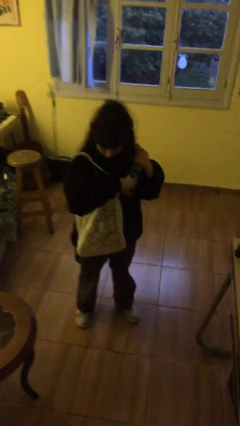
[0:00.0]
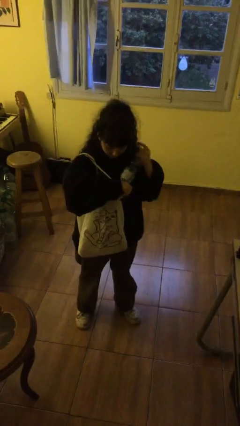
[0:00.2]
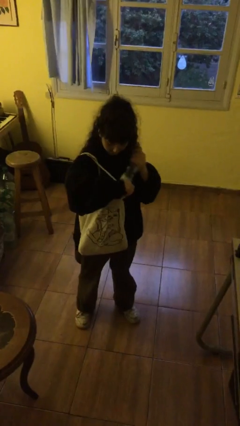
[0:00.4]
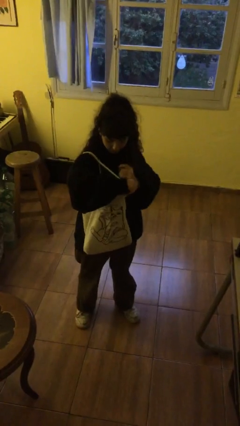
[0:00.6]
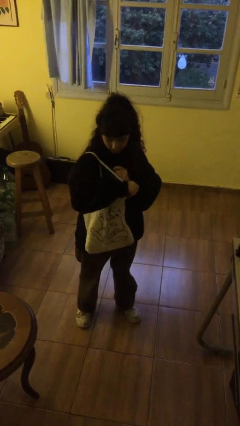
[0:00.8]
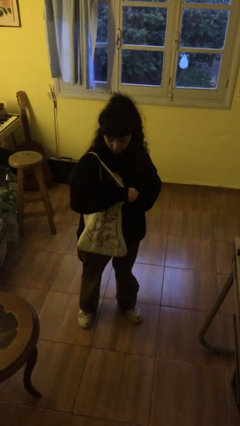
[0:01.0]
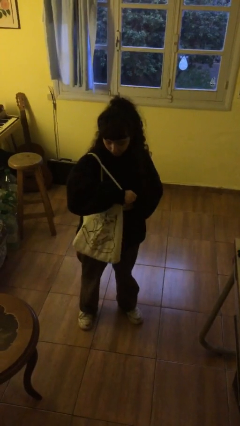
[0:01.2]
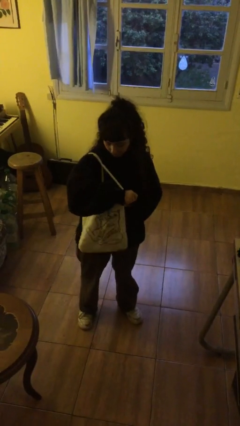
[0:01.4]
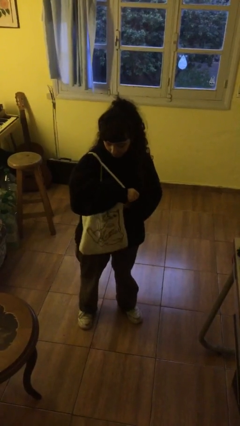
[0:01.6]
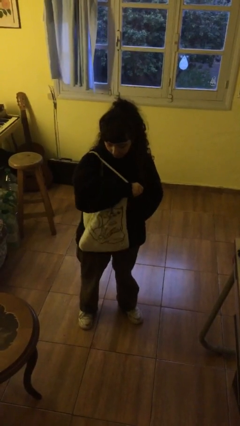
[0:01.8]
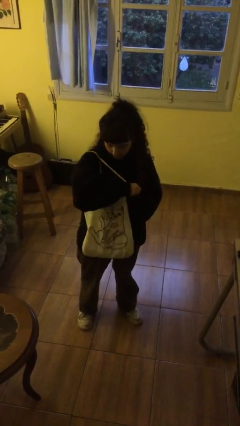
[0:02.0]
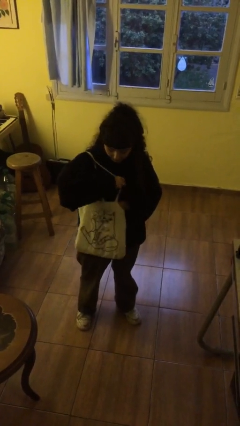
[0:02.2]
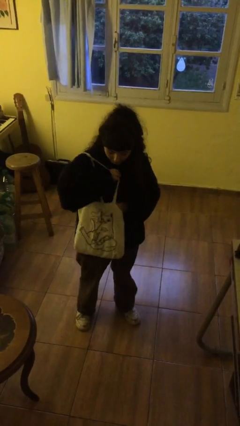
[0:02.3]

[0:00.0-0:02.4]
person puts object into purse

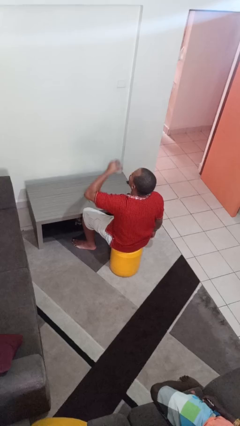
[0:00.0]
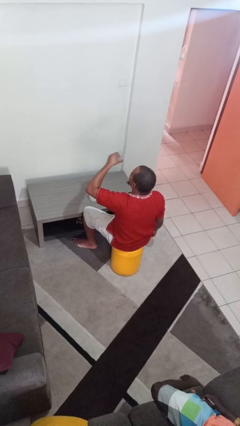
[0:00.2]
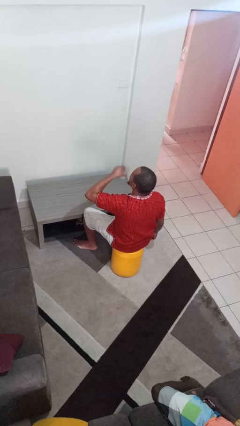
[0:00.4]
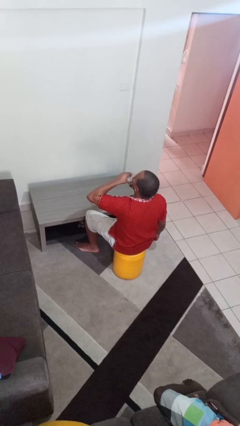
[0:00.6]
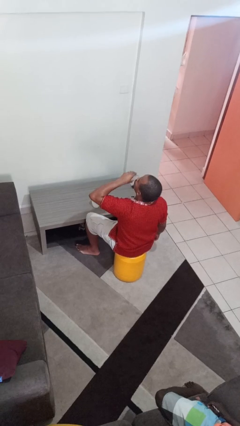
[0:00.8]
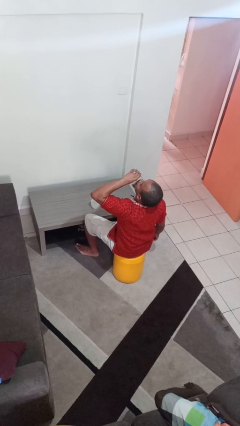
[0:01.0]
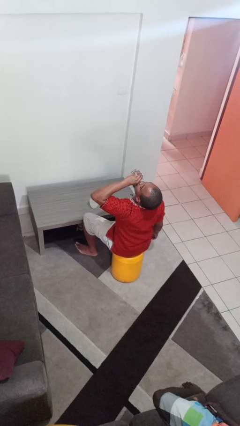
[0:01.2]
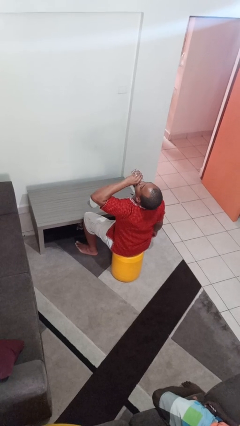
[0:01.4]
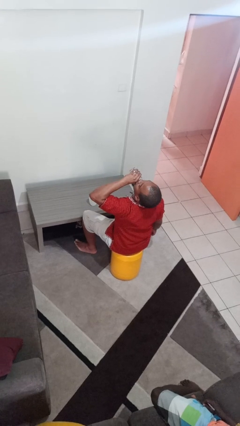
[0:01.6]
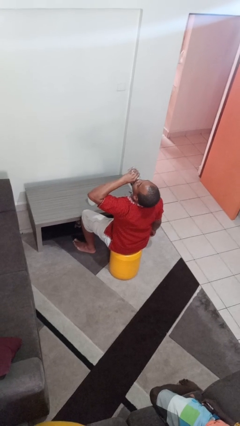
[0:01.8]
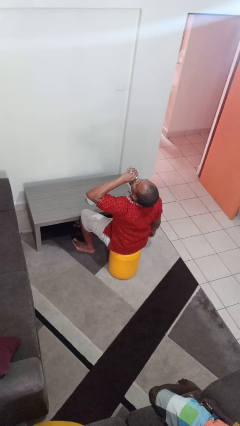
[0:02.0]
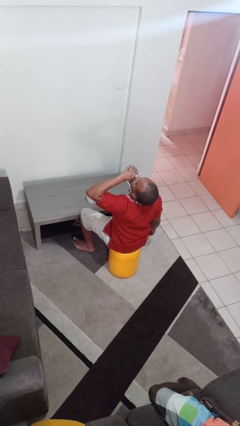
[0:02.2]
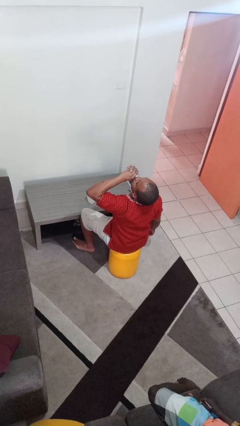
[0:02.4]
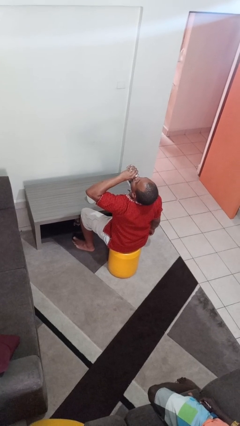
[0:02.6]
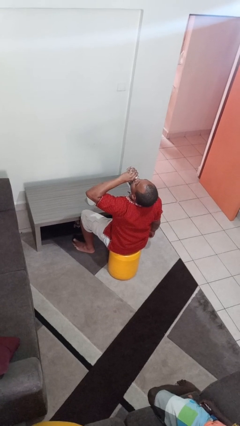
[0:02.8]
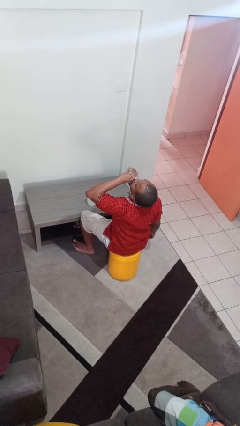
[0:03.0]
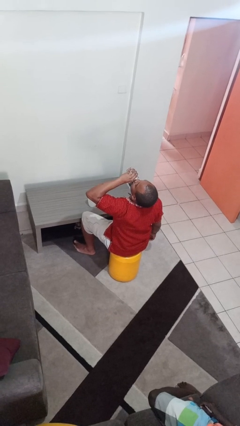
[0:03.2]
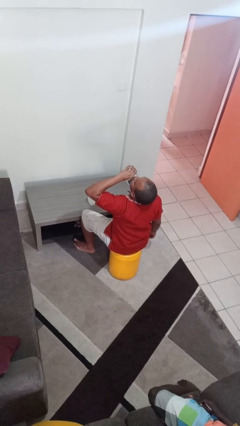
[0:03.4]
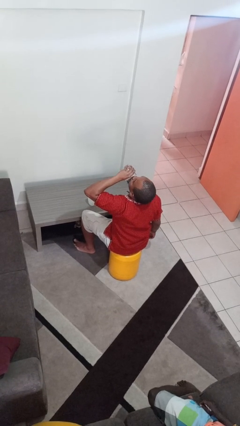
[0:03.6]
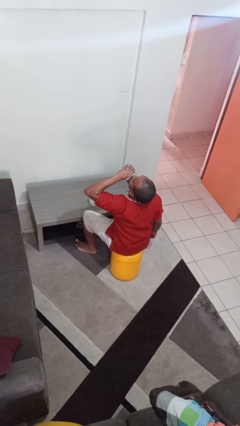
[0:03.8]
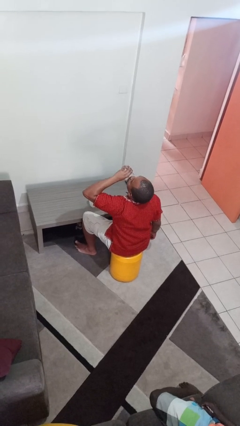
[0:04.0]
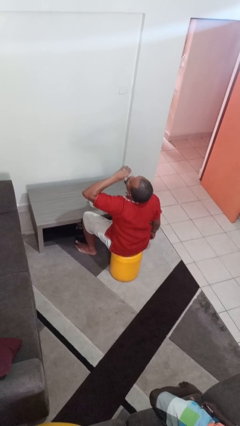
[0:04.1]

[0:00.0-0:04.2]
person drinks from shotglass

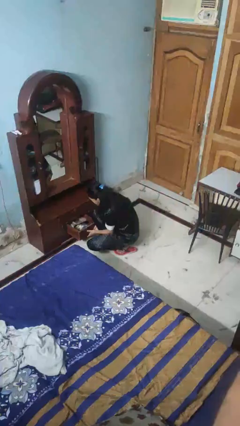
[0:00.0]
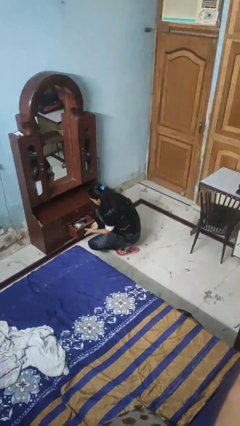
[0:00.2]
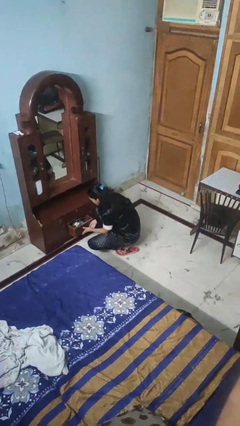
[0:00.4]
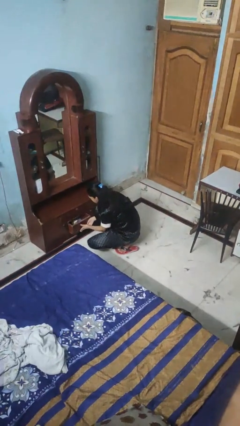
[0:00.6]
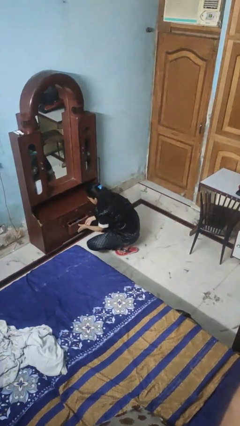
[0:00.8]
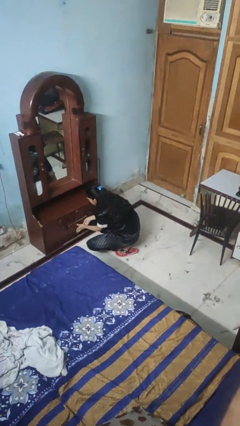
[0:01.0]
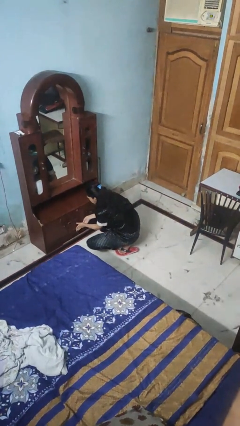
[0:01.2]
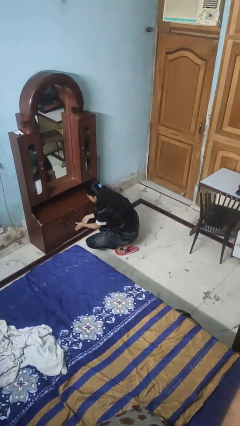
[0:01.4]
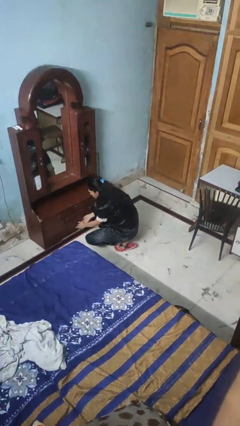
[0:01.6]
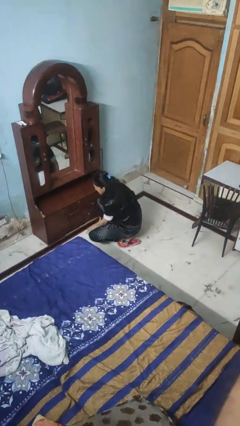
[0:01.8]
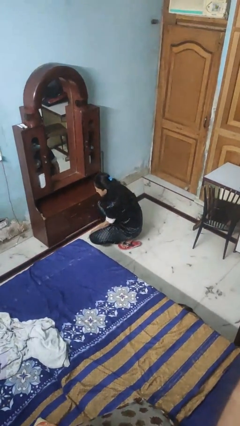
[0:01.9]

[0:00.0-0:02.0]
person closes dresser drawer

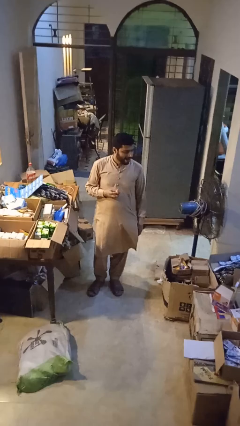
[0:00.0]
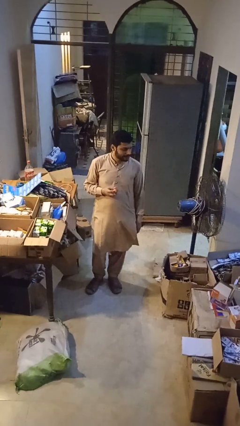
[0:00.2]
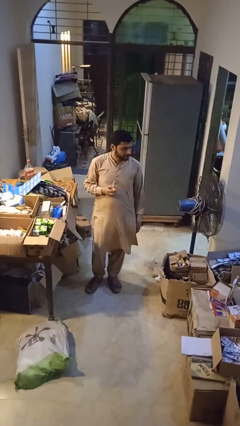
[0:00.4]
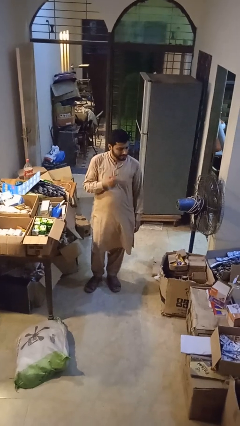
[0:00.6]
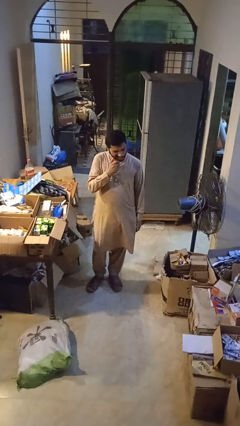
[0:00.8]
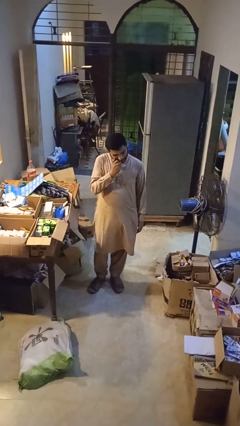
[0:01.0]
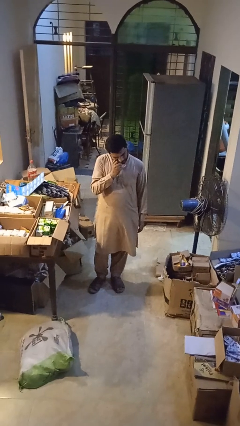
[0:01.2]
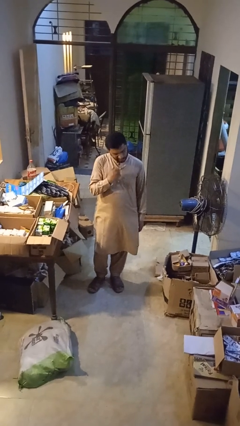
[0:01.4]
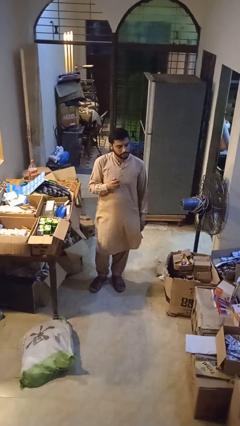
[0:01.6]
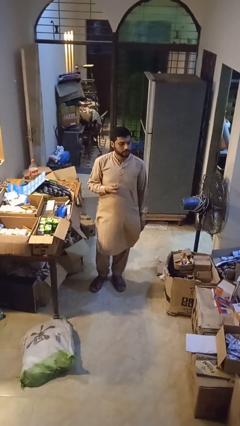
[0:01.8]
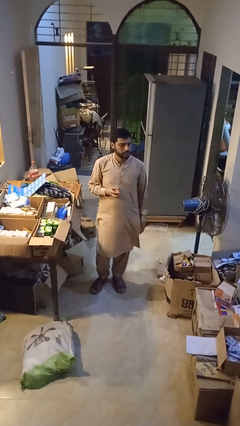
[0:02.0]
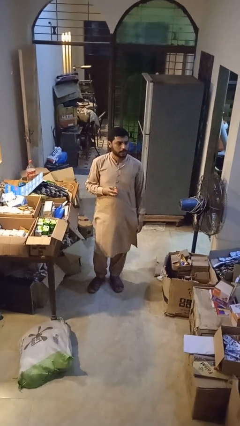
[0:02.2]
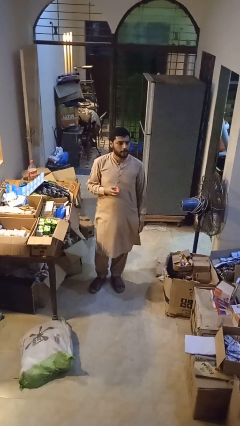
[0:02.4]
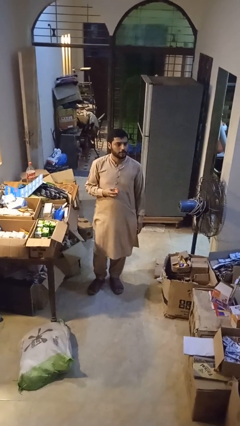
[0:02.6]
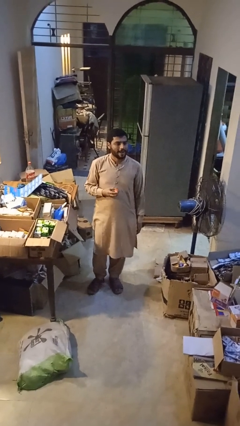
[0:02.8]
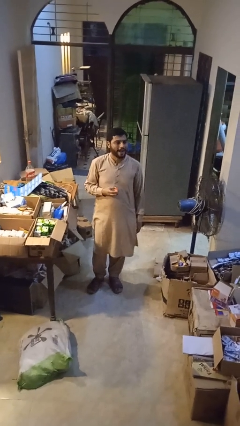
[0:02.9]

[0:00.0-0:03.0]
person eats apple

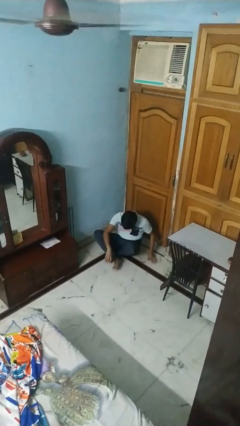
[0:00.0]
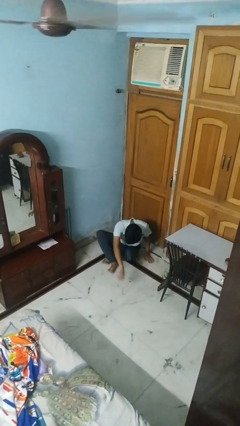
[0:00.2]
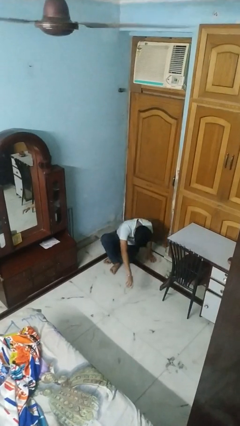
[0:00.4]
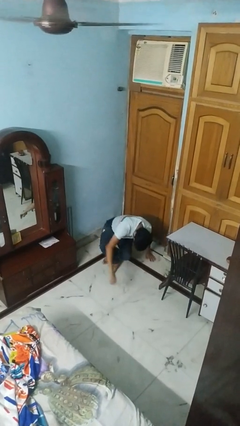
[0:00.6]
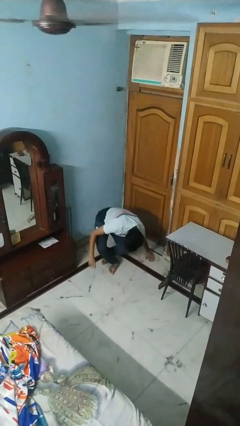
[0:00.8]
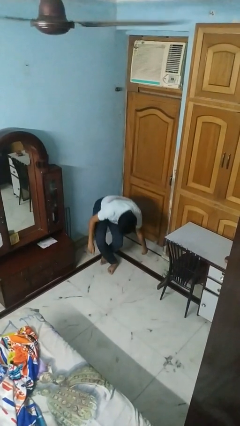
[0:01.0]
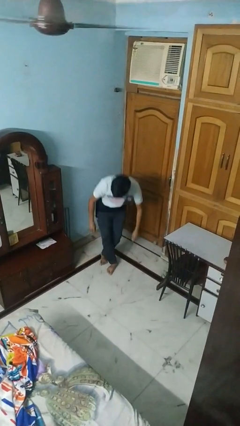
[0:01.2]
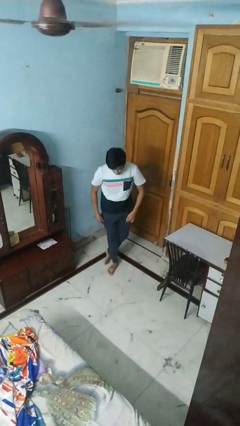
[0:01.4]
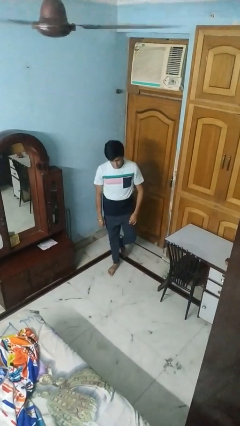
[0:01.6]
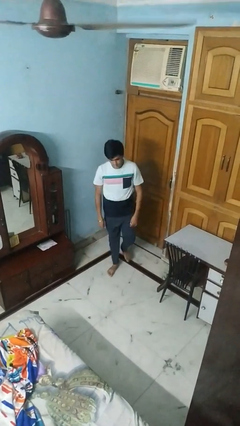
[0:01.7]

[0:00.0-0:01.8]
person stands up from floor

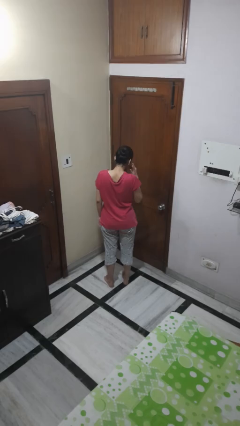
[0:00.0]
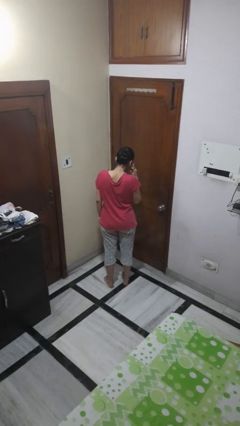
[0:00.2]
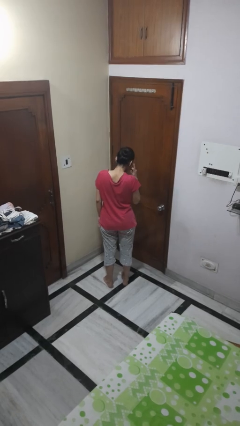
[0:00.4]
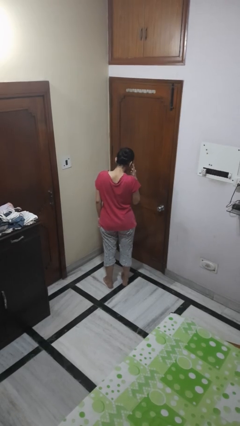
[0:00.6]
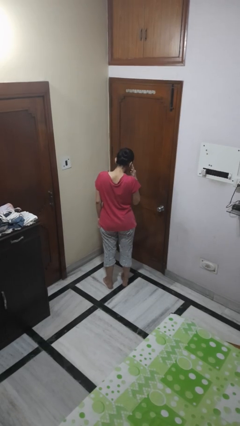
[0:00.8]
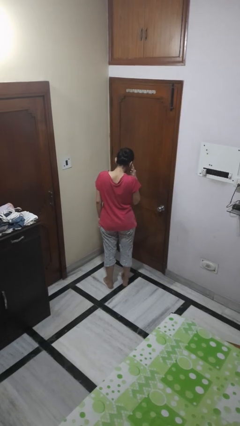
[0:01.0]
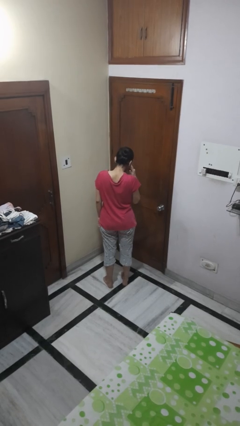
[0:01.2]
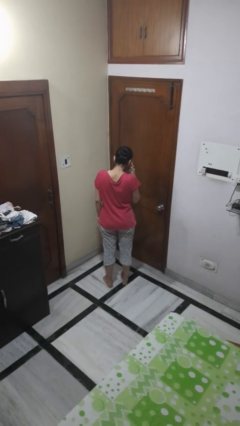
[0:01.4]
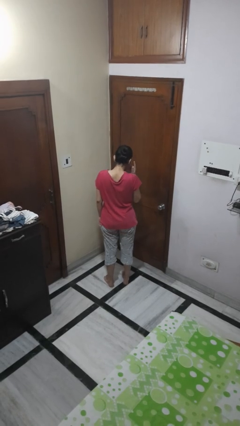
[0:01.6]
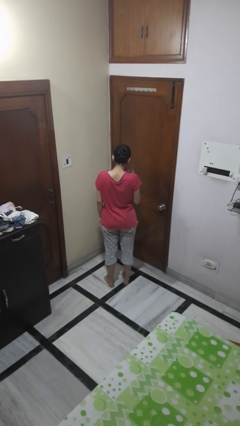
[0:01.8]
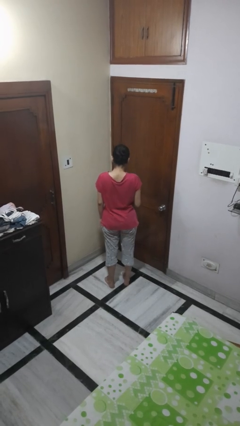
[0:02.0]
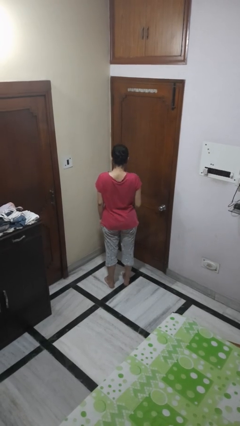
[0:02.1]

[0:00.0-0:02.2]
person gestures listen closely

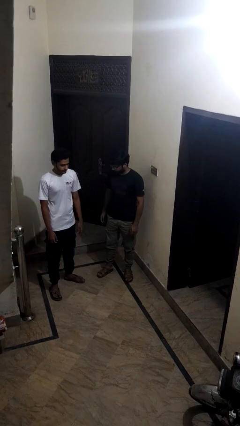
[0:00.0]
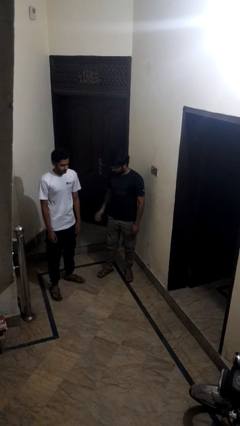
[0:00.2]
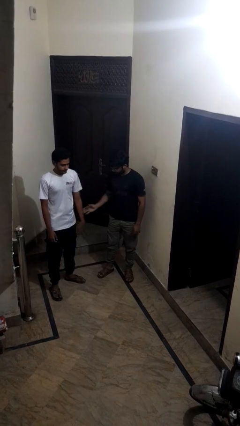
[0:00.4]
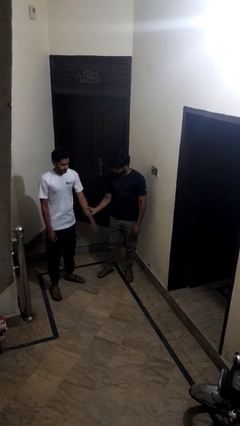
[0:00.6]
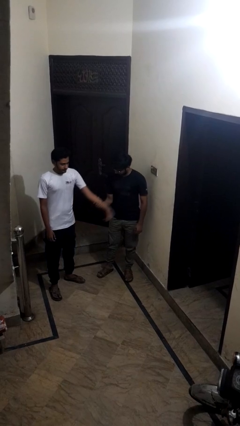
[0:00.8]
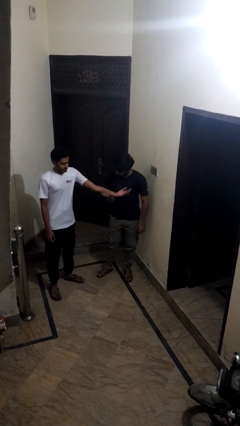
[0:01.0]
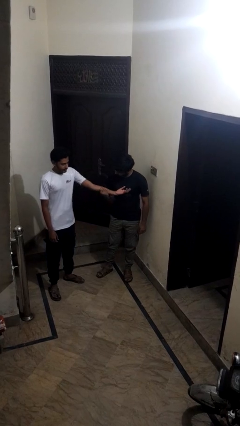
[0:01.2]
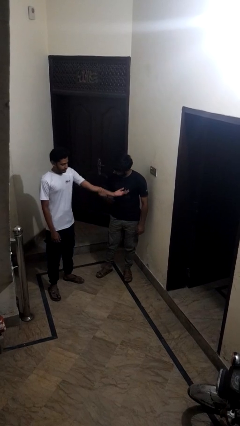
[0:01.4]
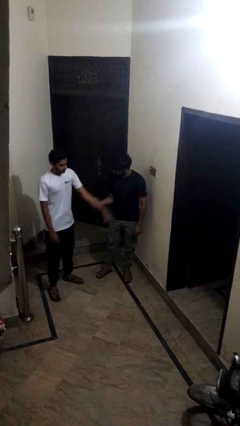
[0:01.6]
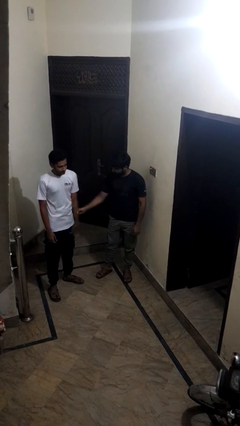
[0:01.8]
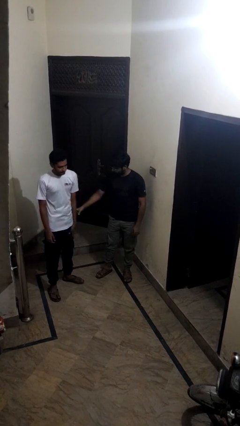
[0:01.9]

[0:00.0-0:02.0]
person grabs person by forearm
